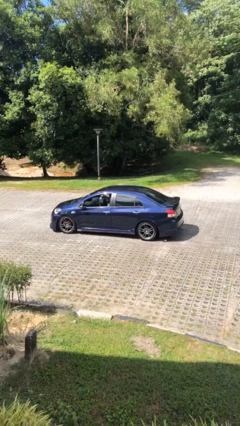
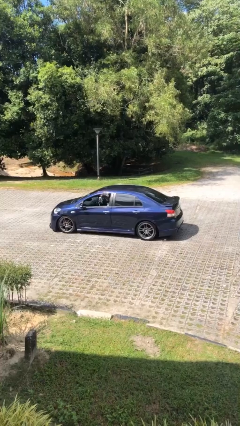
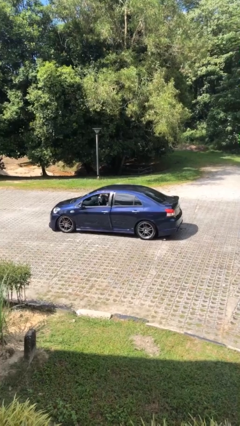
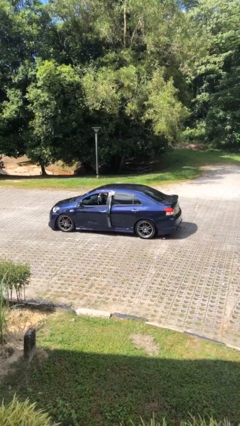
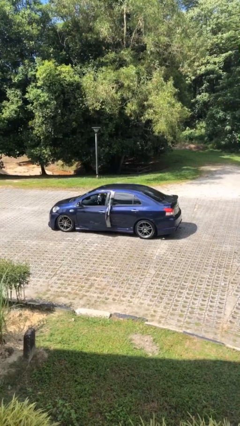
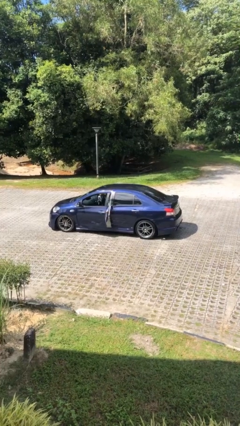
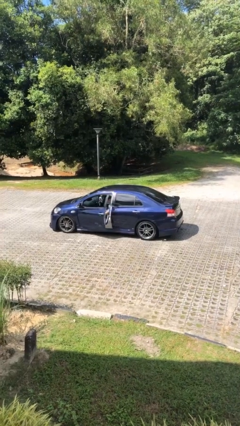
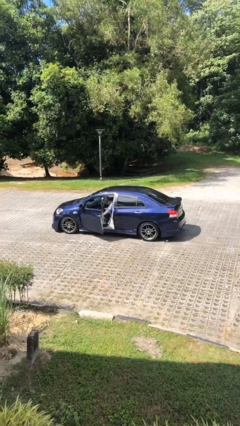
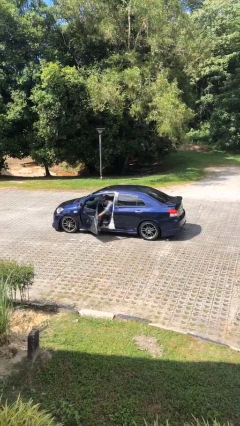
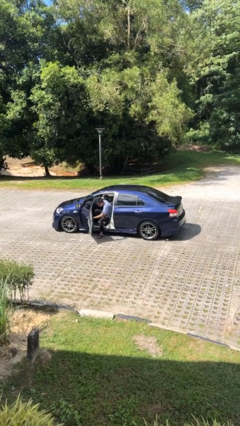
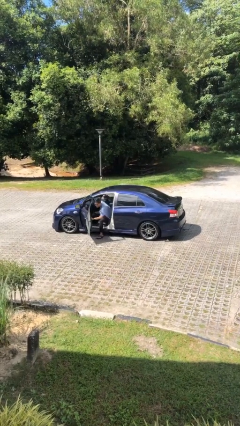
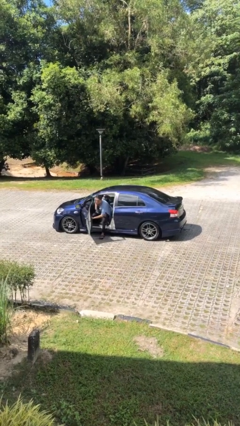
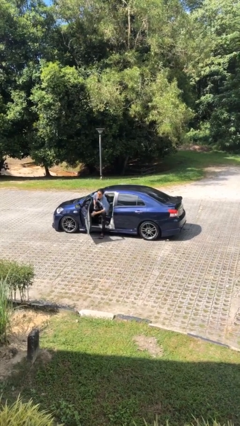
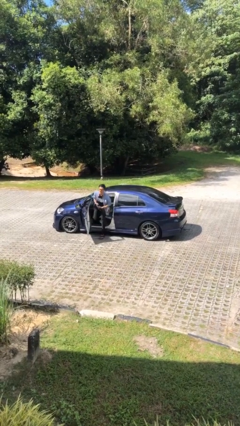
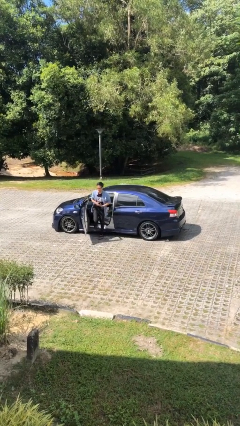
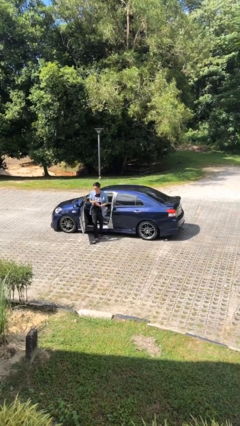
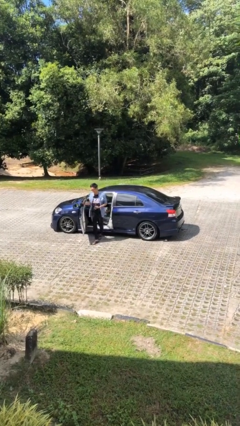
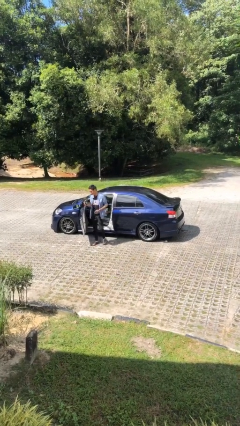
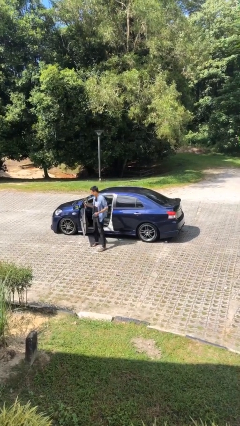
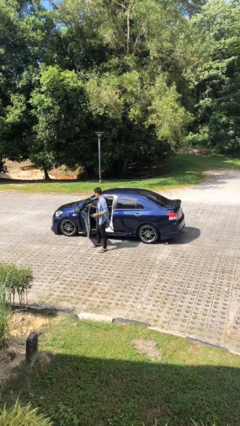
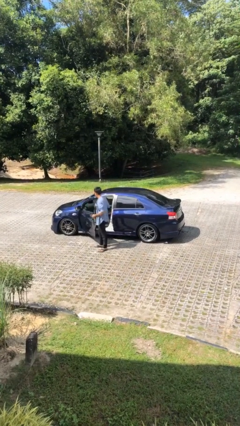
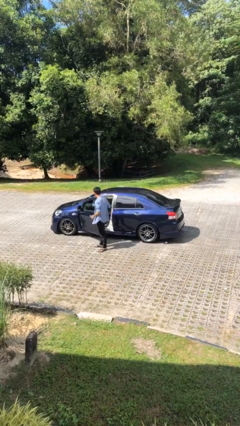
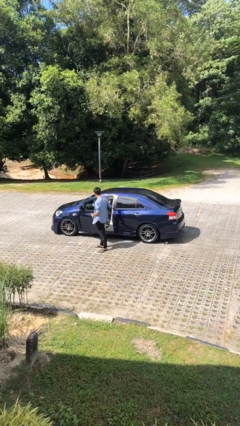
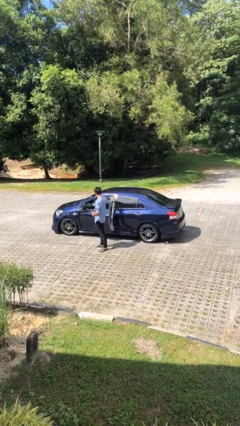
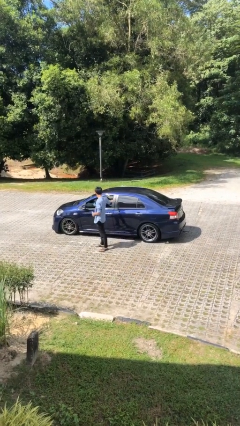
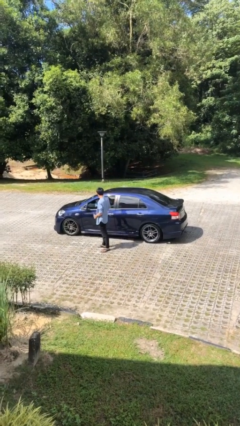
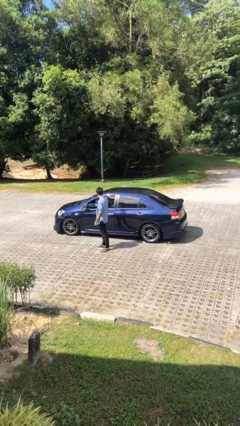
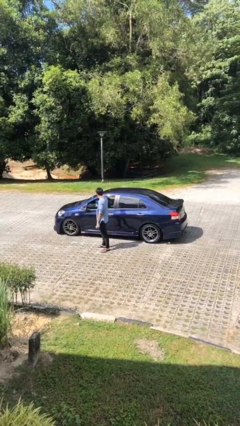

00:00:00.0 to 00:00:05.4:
car drops off person

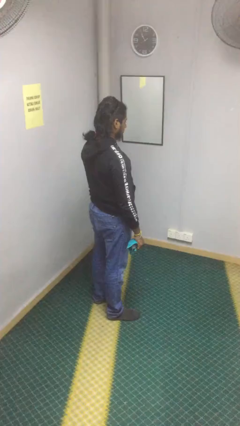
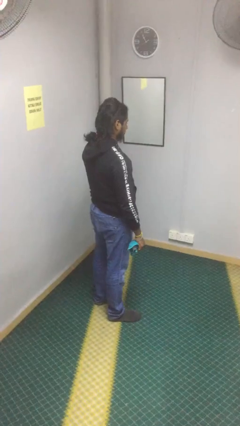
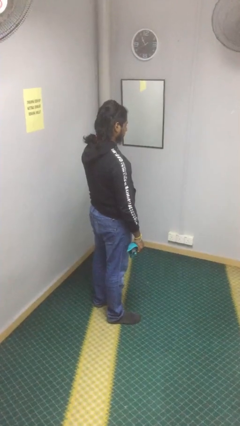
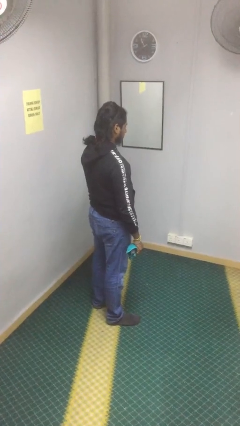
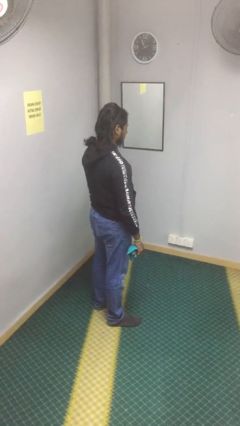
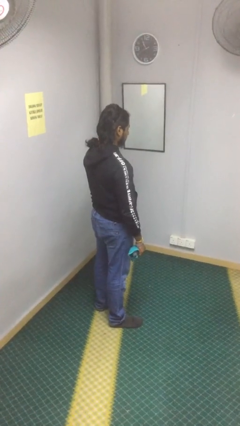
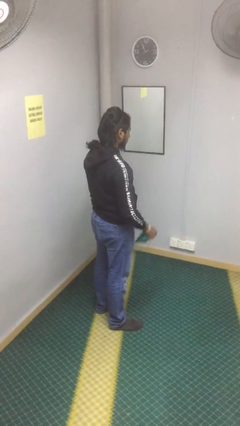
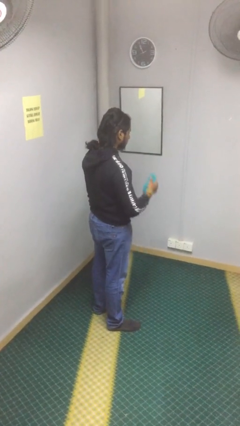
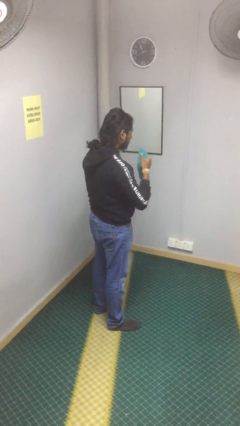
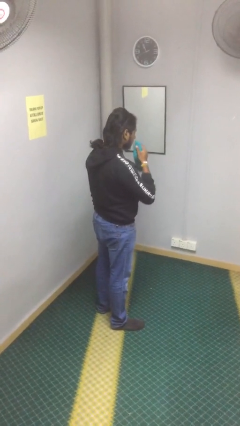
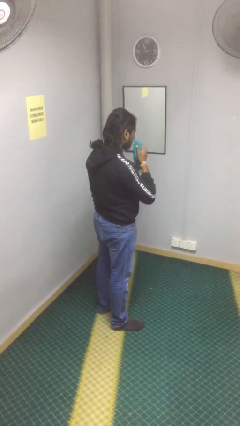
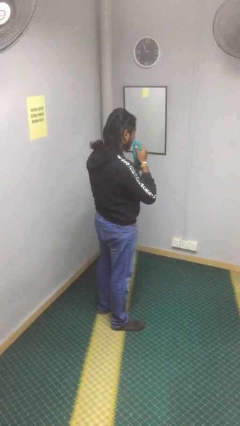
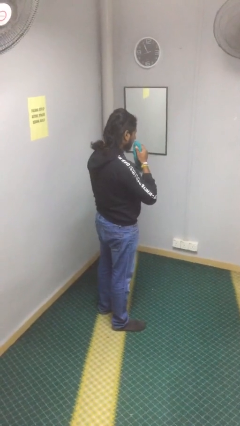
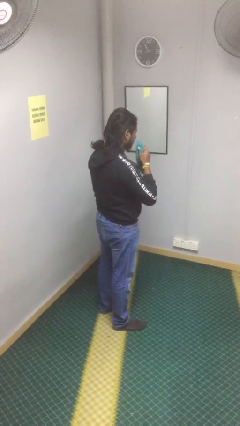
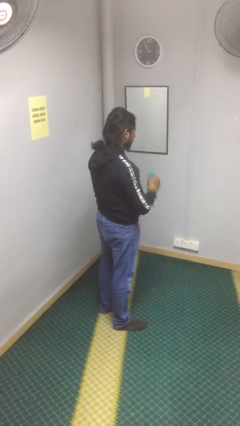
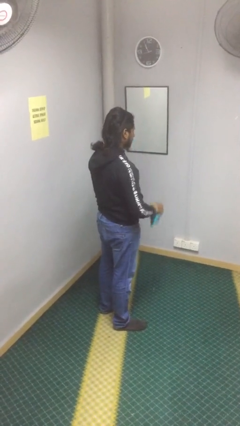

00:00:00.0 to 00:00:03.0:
person wipes mouth with napkin

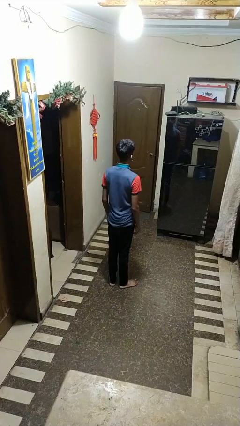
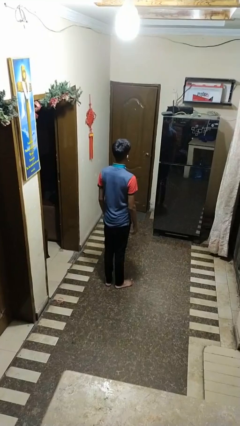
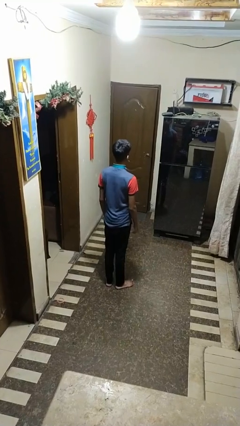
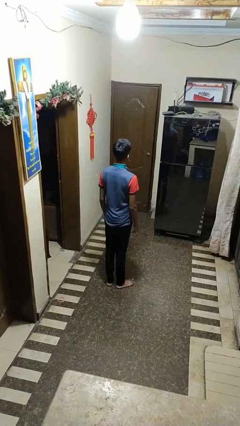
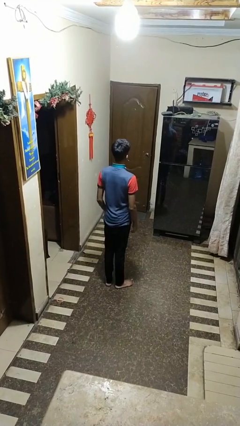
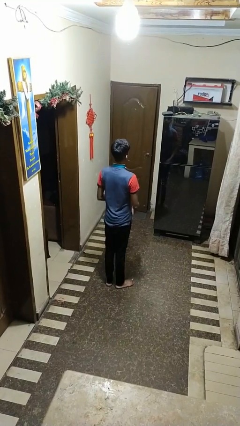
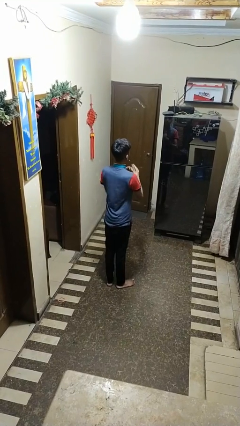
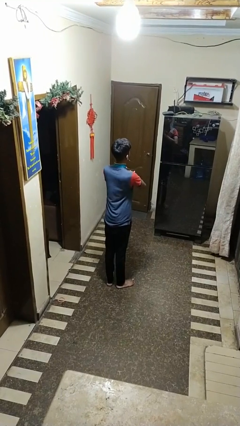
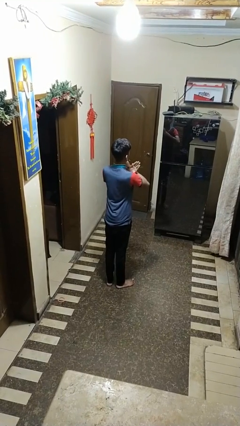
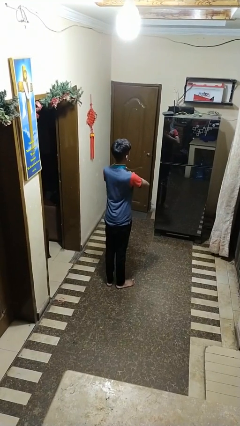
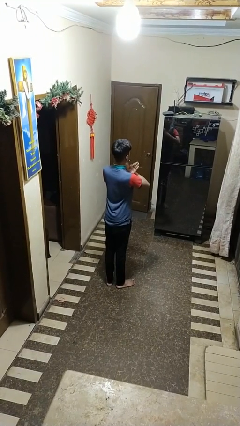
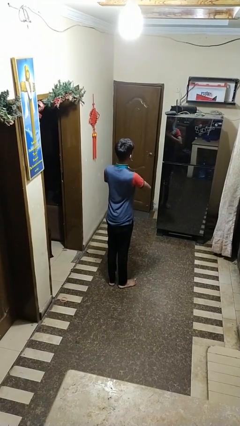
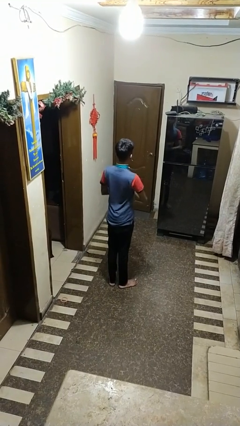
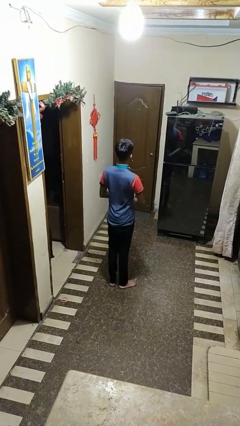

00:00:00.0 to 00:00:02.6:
person drums on chest

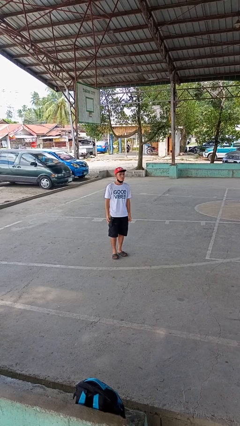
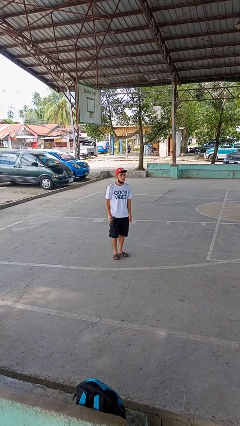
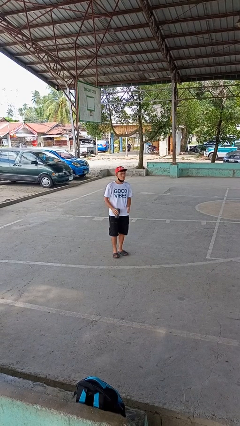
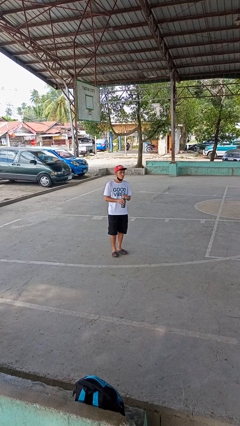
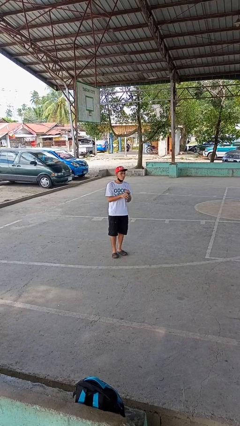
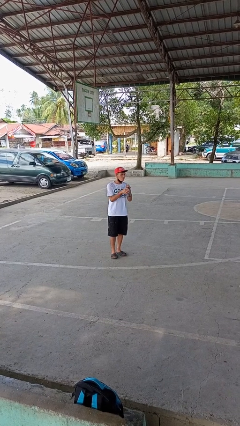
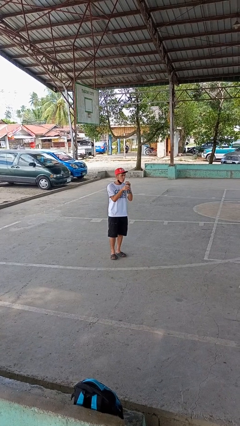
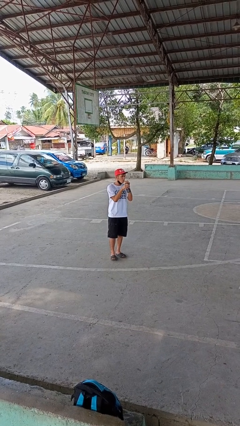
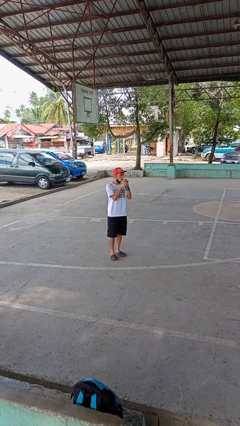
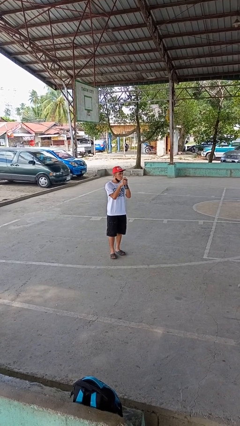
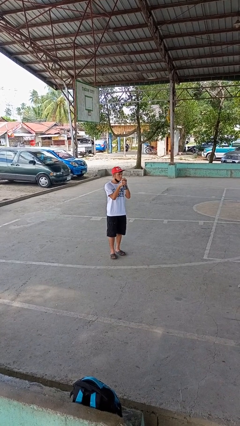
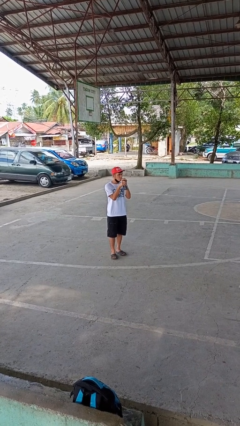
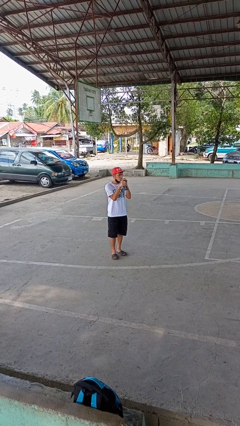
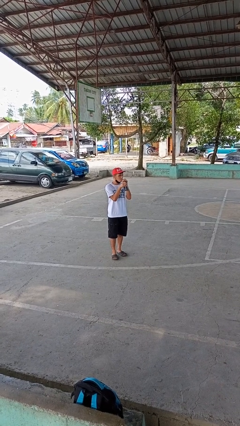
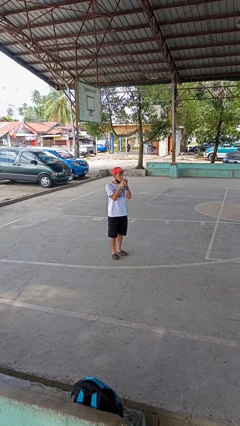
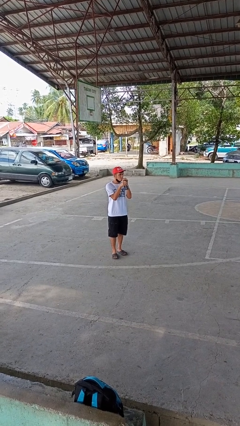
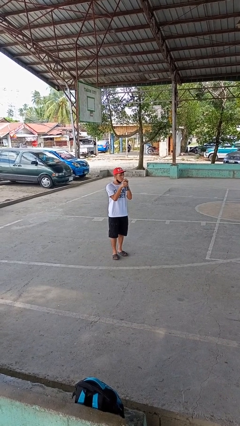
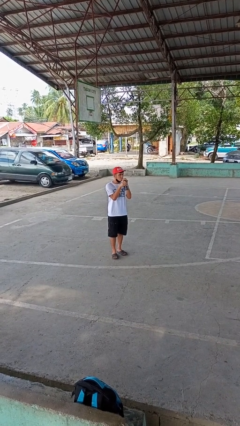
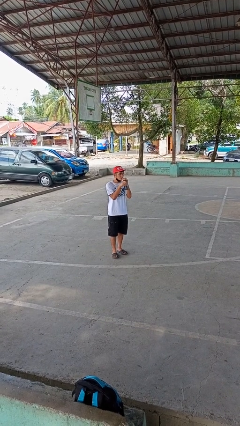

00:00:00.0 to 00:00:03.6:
person drinks from straw

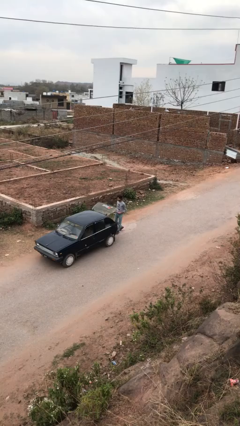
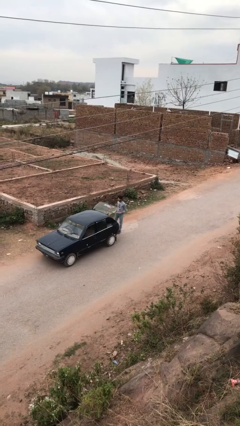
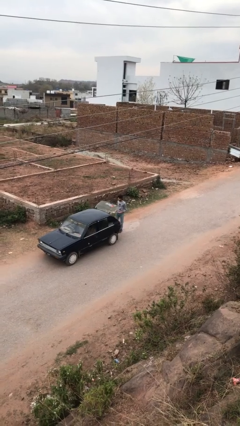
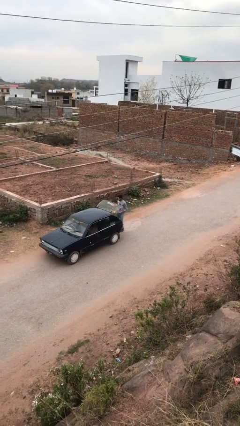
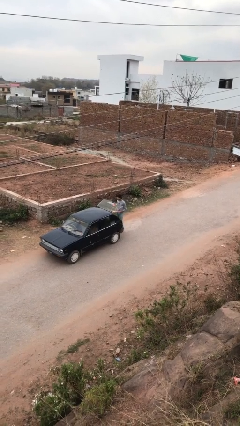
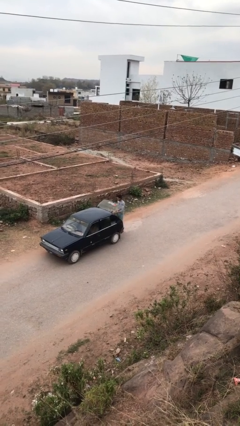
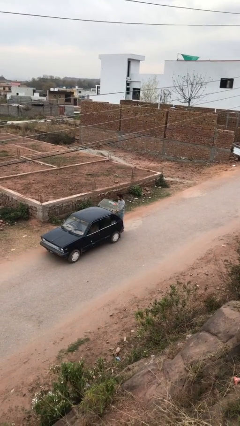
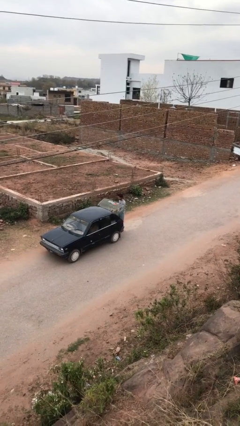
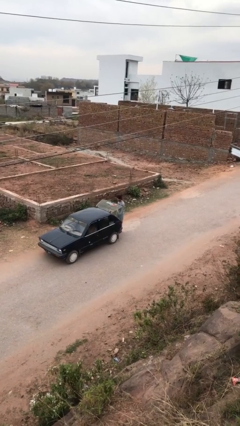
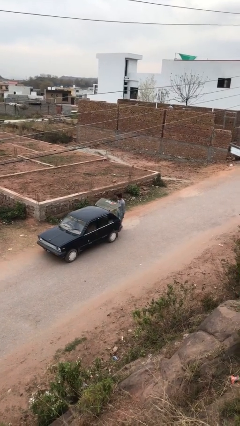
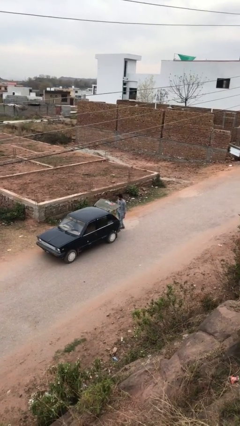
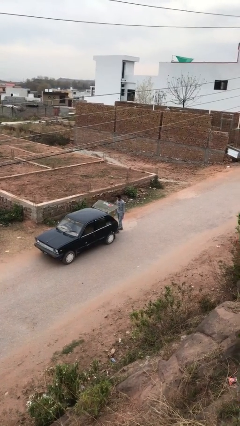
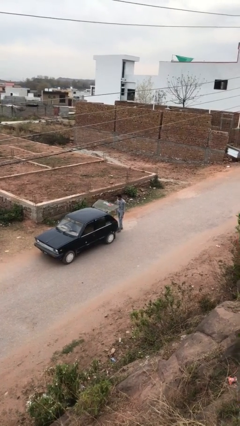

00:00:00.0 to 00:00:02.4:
person loads car

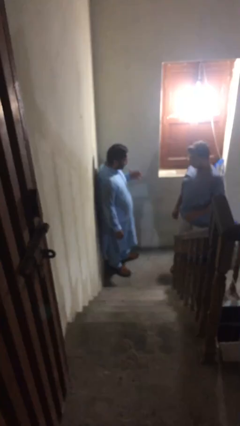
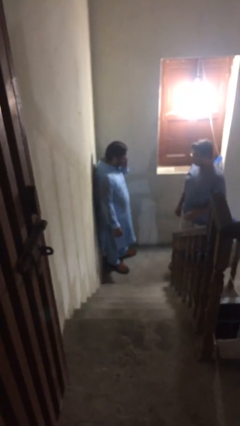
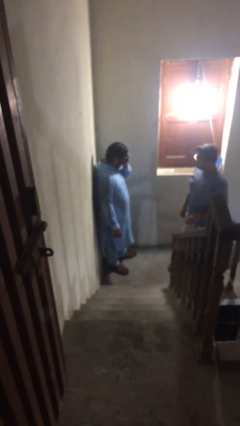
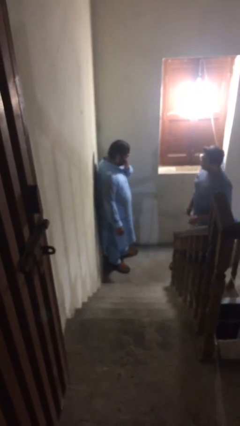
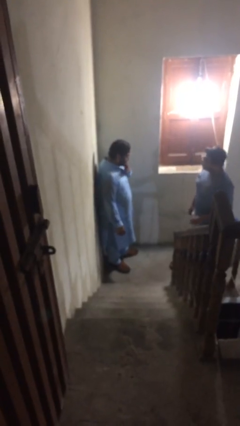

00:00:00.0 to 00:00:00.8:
person shakes hand
